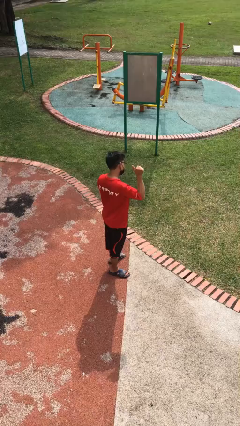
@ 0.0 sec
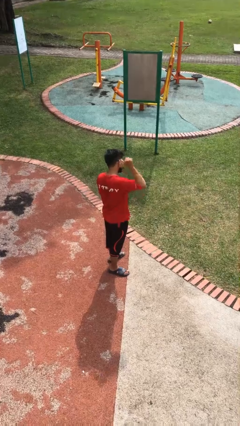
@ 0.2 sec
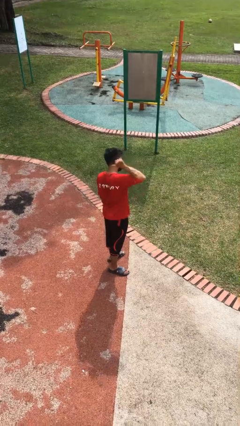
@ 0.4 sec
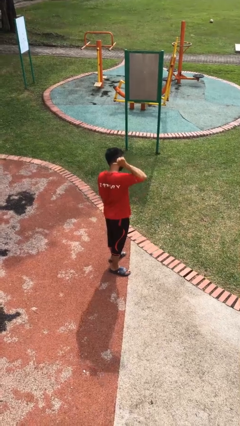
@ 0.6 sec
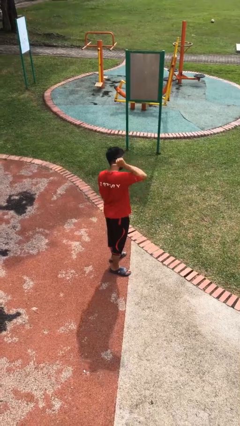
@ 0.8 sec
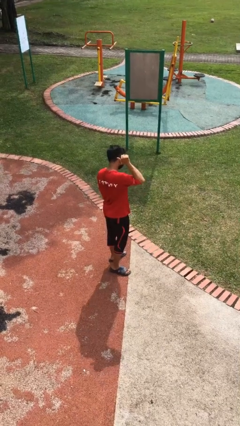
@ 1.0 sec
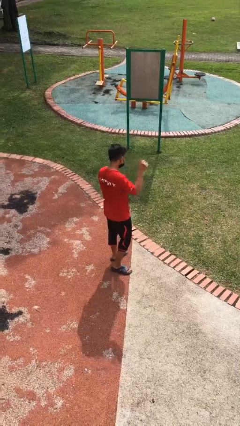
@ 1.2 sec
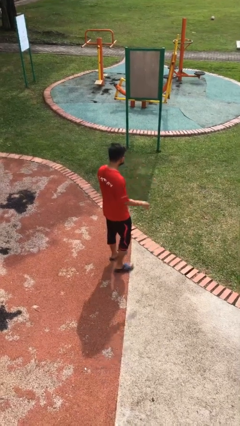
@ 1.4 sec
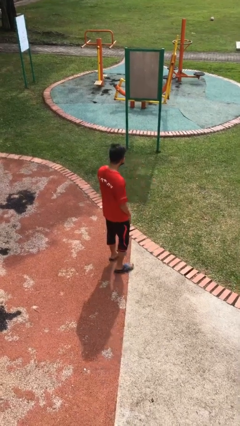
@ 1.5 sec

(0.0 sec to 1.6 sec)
person gestures behind me

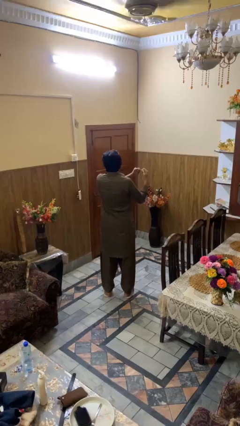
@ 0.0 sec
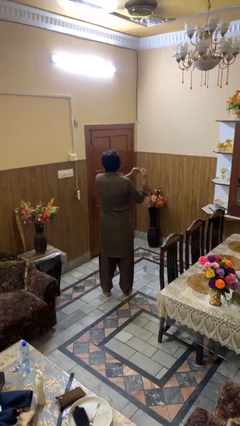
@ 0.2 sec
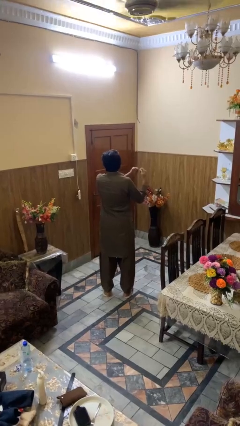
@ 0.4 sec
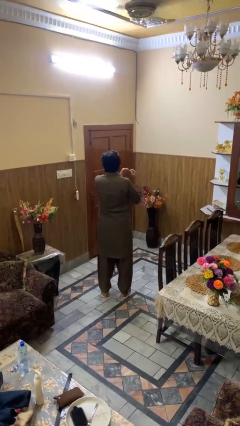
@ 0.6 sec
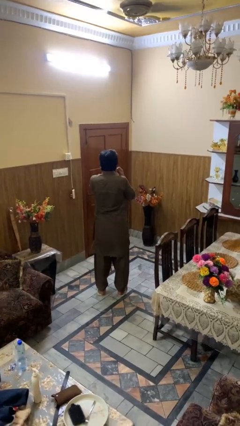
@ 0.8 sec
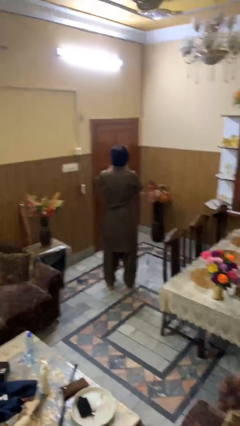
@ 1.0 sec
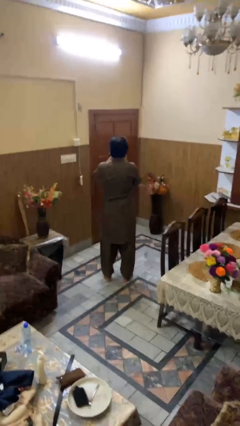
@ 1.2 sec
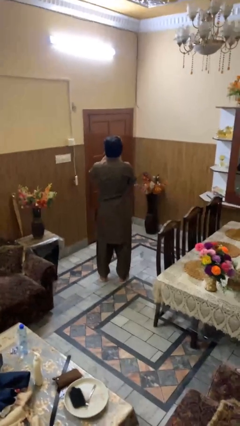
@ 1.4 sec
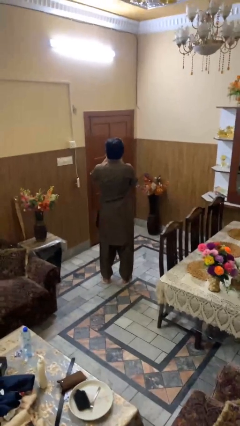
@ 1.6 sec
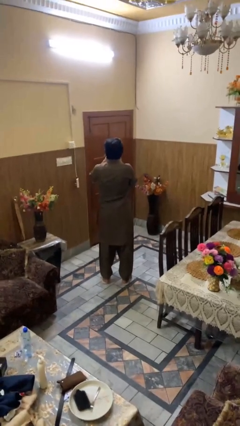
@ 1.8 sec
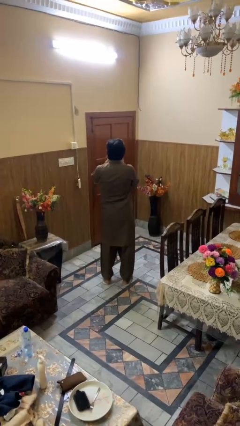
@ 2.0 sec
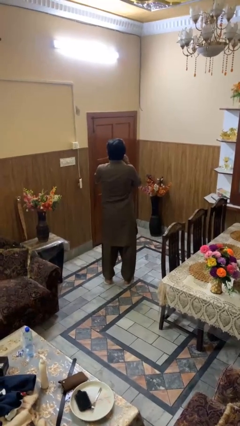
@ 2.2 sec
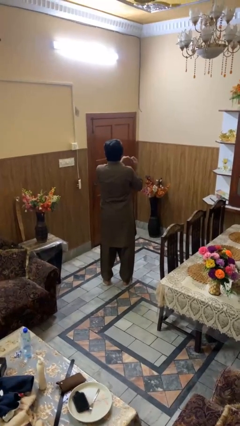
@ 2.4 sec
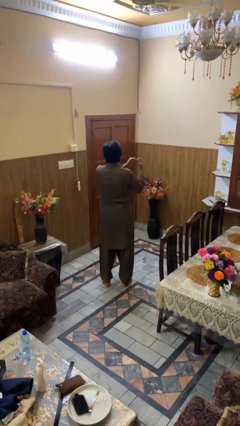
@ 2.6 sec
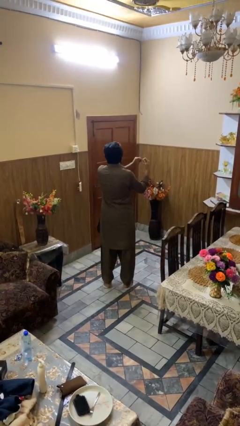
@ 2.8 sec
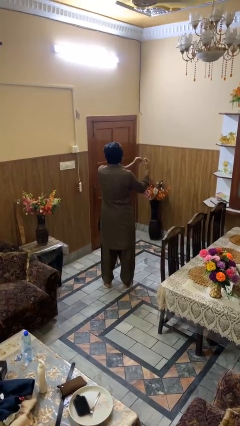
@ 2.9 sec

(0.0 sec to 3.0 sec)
person flosses

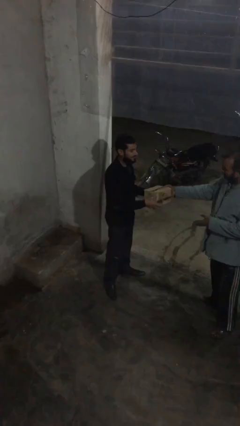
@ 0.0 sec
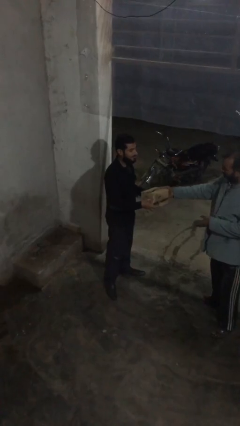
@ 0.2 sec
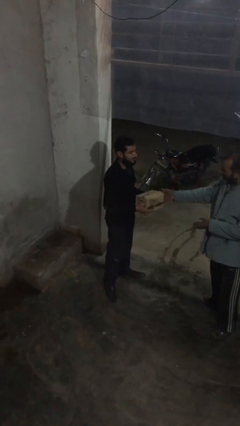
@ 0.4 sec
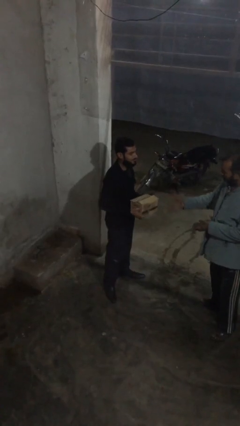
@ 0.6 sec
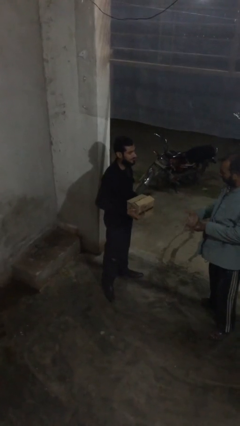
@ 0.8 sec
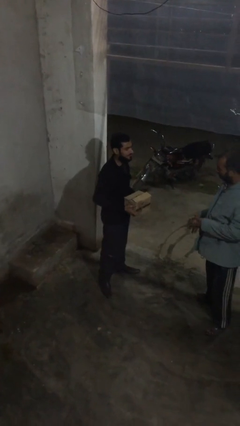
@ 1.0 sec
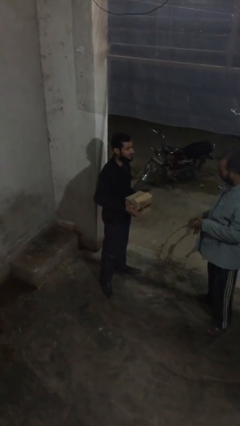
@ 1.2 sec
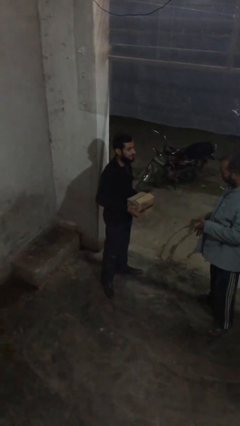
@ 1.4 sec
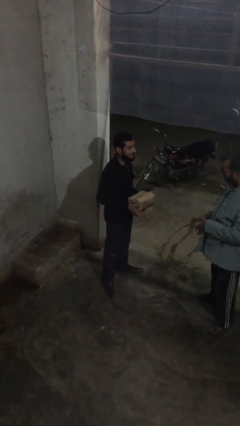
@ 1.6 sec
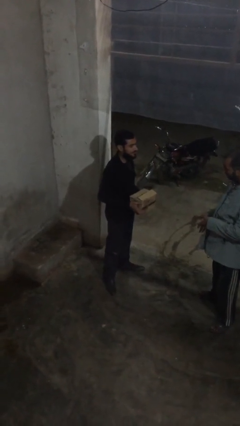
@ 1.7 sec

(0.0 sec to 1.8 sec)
person transfers object to person

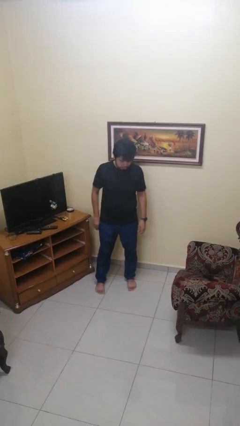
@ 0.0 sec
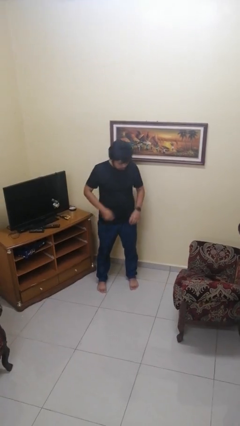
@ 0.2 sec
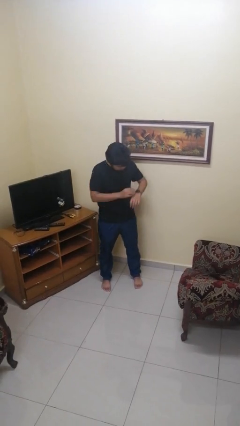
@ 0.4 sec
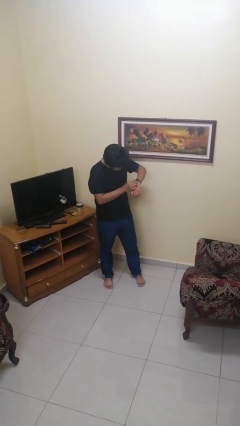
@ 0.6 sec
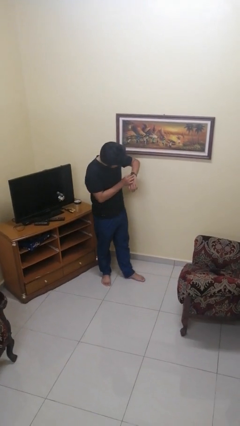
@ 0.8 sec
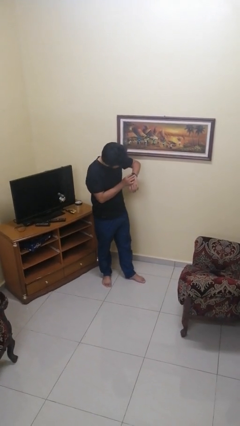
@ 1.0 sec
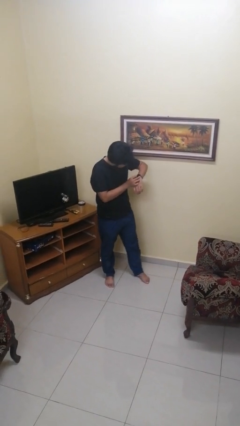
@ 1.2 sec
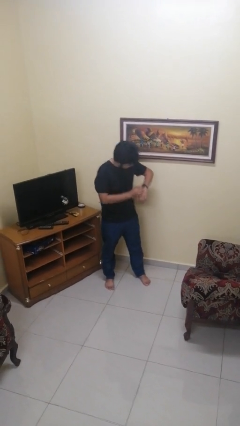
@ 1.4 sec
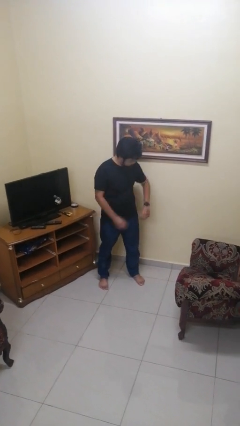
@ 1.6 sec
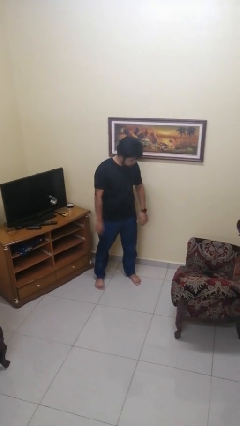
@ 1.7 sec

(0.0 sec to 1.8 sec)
person looks at wristwatch

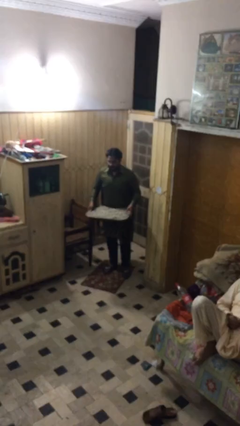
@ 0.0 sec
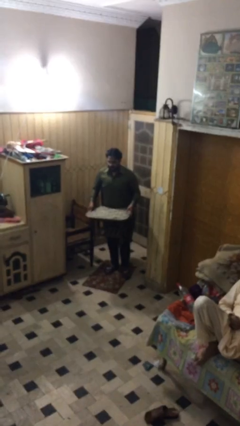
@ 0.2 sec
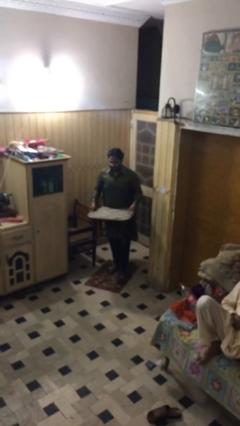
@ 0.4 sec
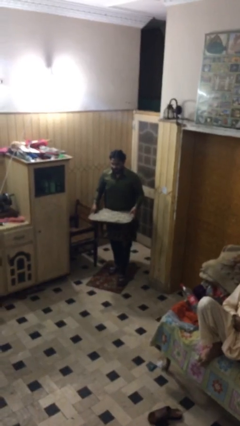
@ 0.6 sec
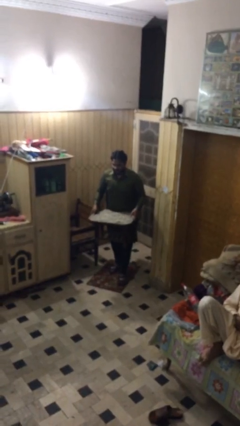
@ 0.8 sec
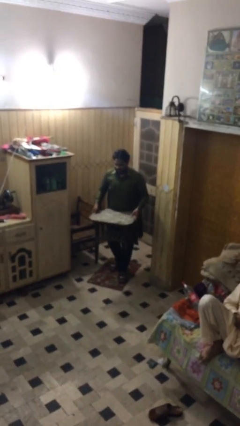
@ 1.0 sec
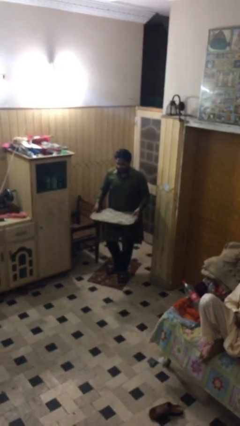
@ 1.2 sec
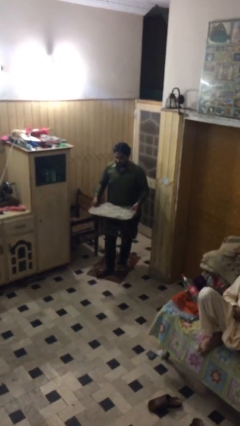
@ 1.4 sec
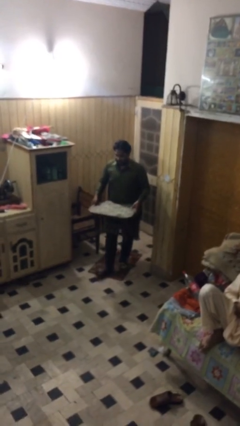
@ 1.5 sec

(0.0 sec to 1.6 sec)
person carries heavy object

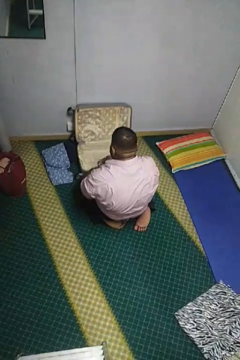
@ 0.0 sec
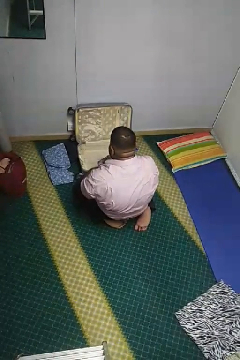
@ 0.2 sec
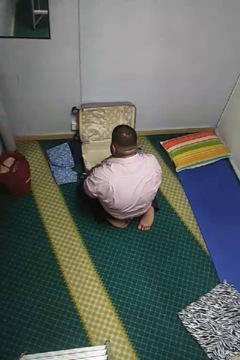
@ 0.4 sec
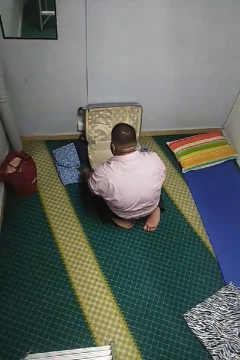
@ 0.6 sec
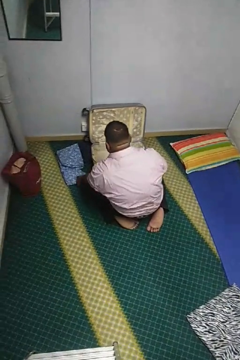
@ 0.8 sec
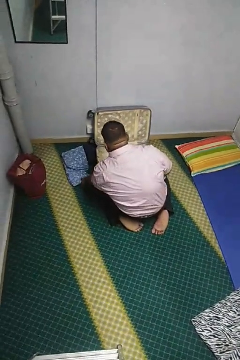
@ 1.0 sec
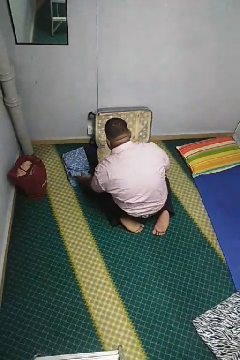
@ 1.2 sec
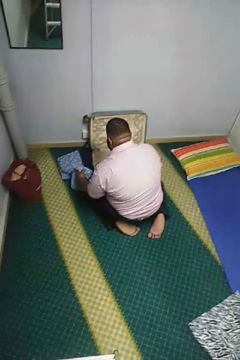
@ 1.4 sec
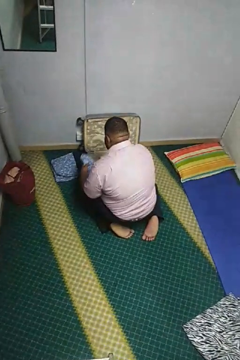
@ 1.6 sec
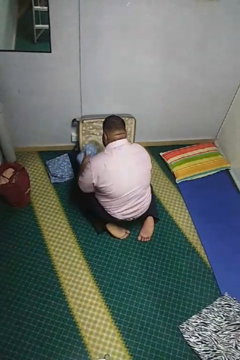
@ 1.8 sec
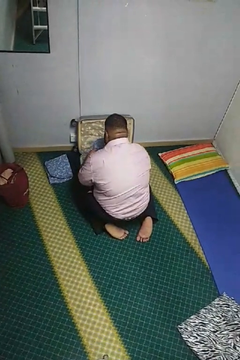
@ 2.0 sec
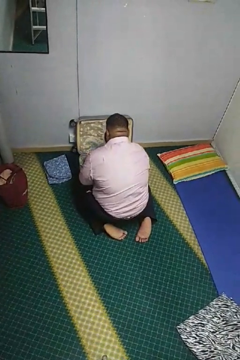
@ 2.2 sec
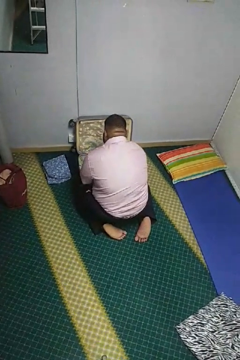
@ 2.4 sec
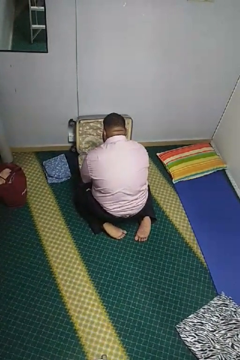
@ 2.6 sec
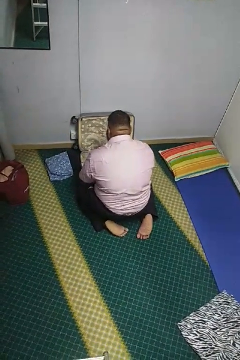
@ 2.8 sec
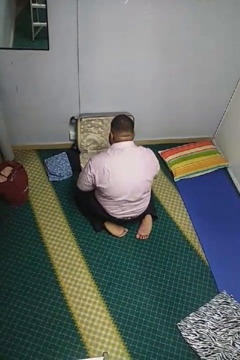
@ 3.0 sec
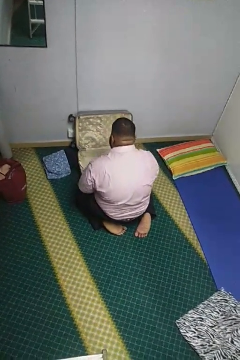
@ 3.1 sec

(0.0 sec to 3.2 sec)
person loads clothes into suitcase

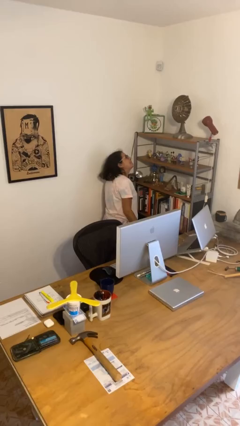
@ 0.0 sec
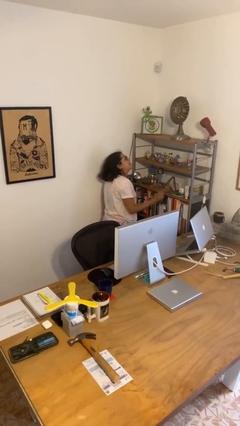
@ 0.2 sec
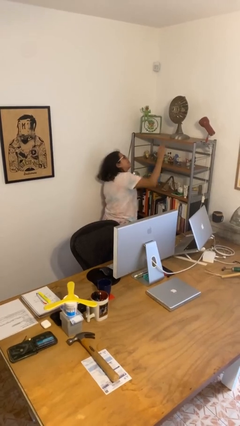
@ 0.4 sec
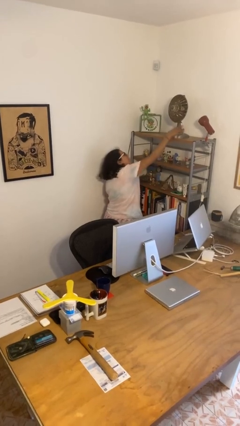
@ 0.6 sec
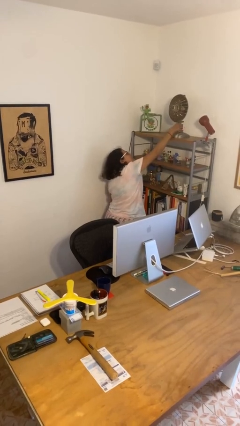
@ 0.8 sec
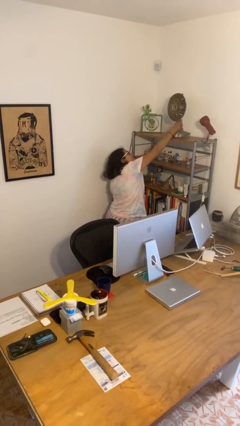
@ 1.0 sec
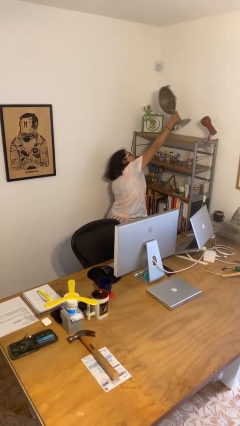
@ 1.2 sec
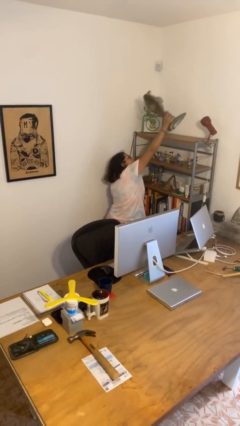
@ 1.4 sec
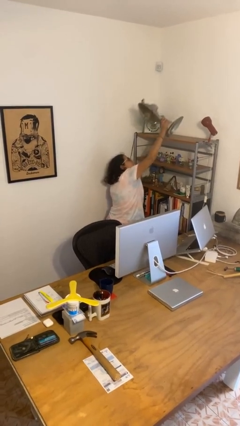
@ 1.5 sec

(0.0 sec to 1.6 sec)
person picks up object from shelf

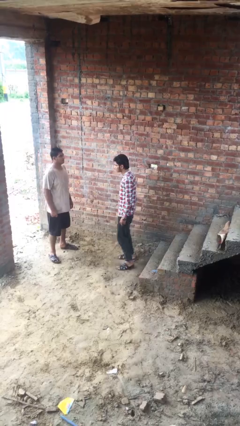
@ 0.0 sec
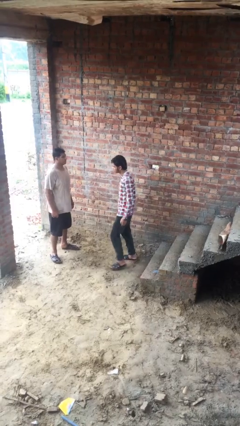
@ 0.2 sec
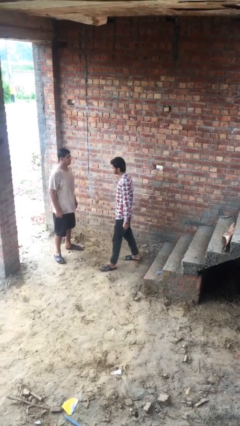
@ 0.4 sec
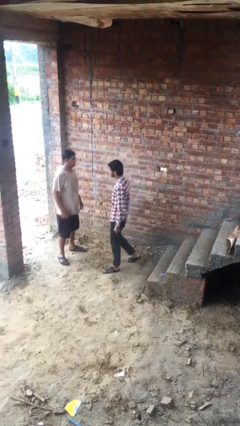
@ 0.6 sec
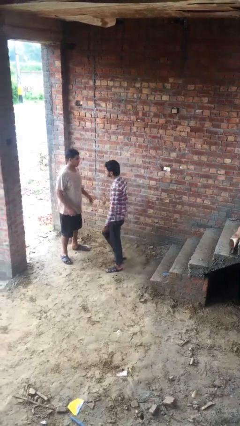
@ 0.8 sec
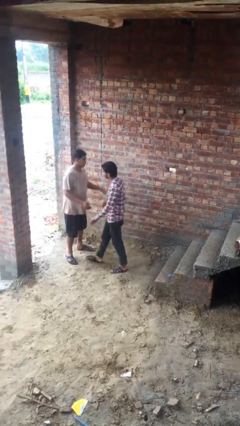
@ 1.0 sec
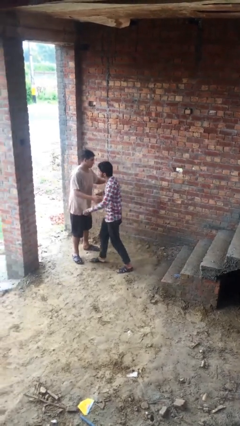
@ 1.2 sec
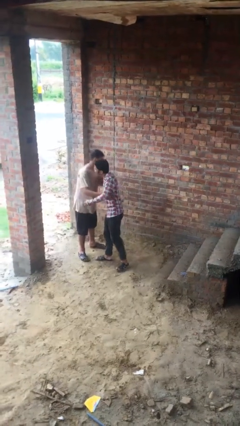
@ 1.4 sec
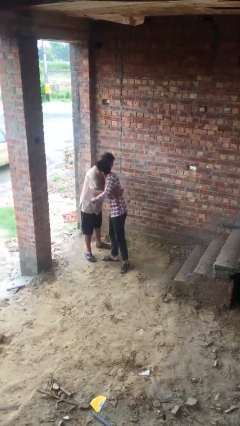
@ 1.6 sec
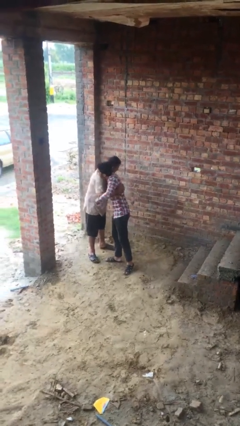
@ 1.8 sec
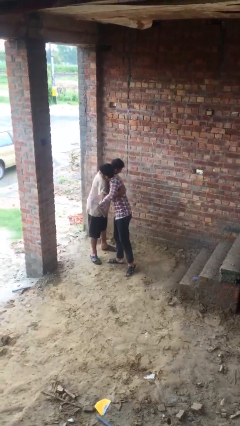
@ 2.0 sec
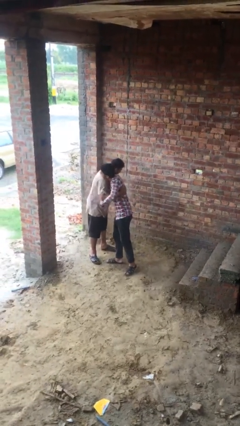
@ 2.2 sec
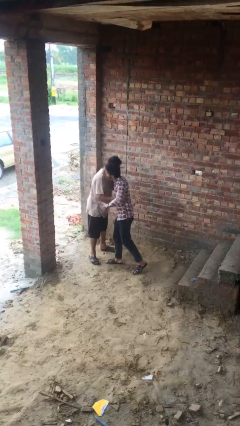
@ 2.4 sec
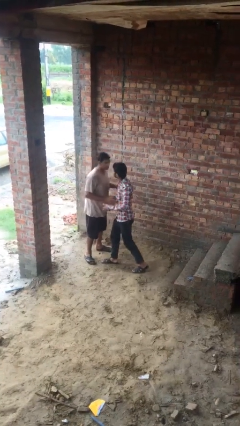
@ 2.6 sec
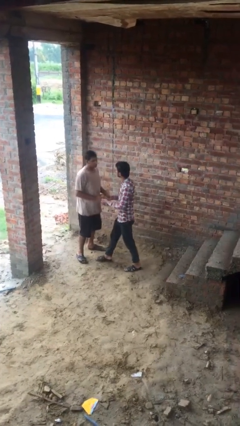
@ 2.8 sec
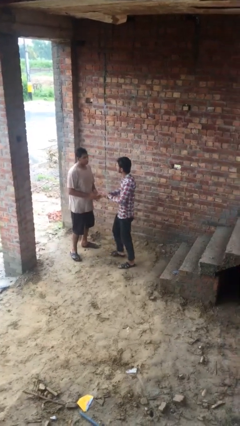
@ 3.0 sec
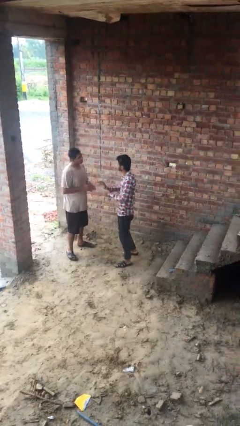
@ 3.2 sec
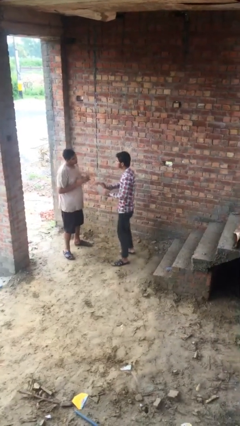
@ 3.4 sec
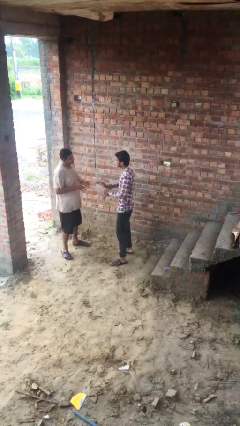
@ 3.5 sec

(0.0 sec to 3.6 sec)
person embraces person
